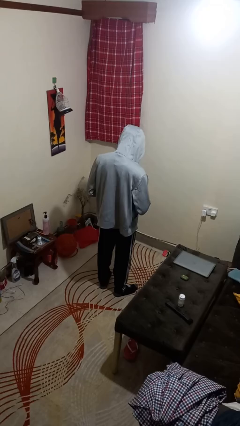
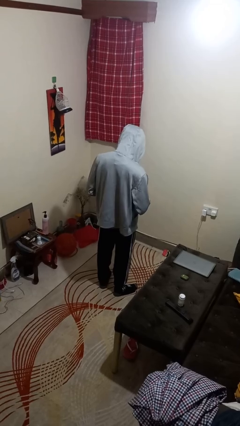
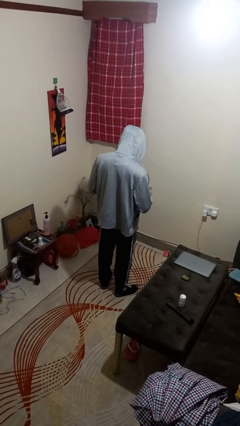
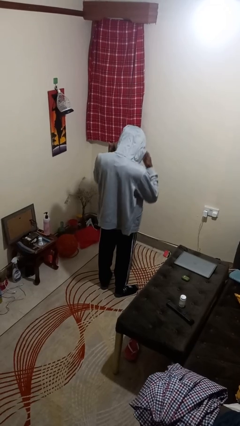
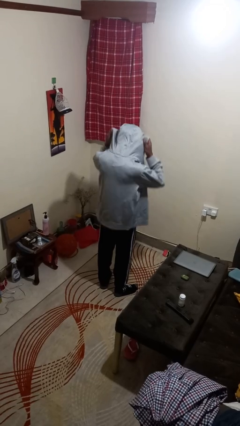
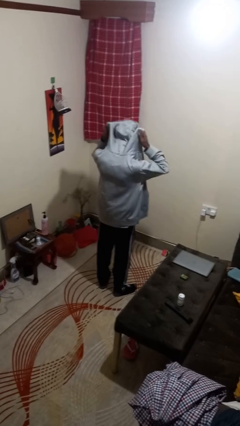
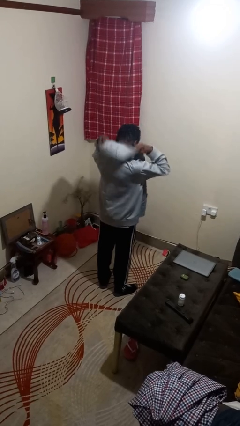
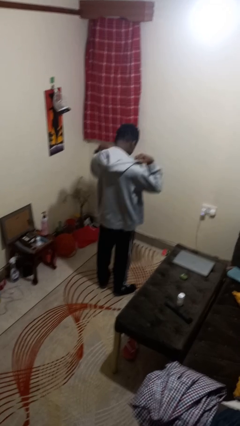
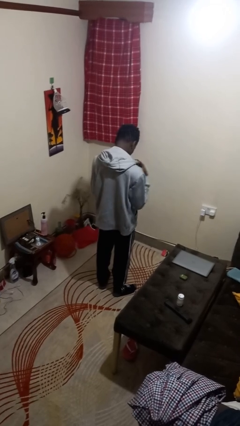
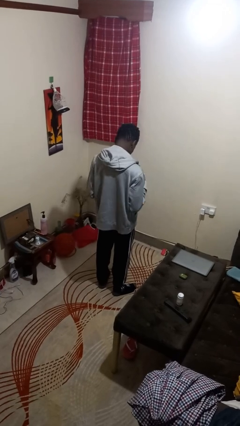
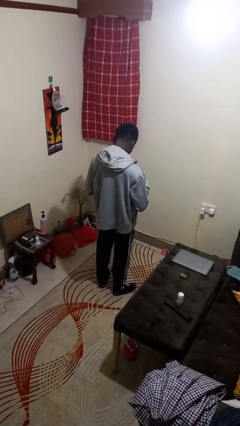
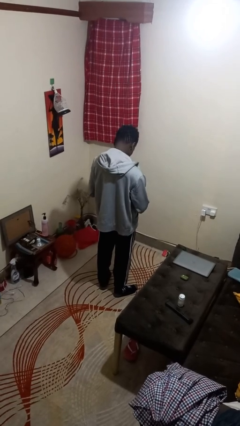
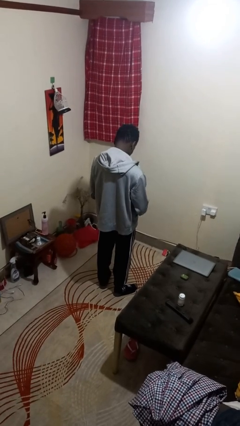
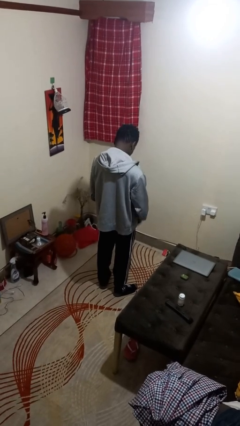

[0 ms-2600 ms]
person takes off hoodie

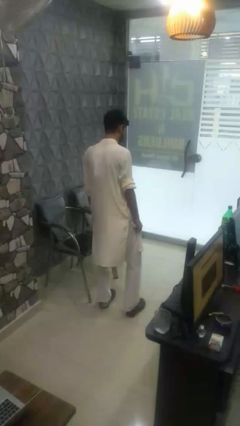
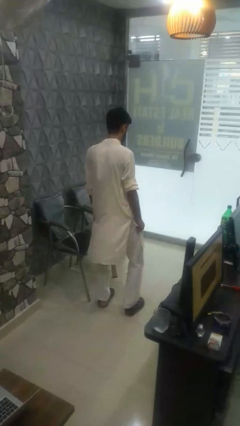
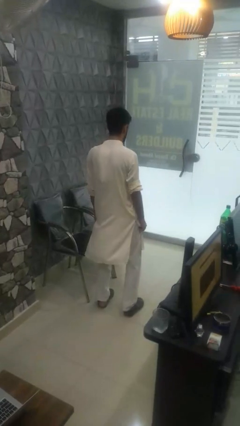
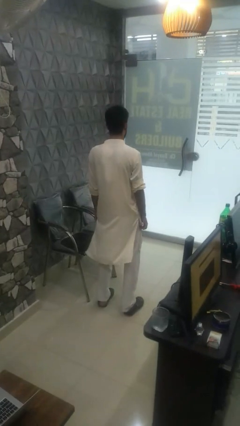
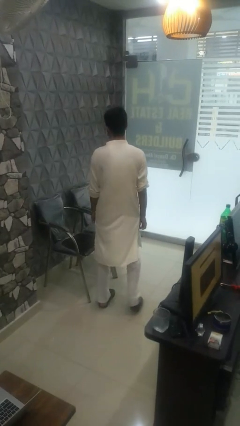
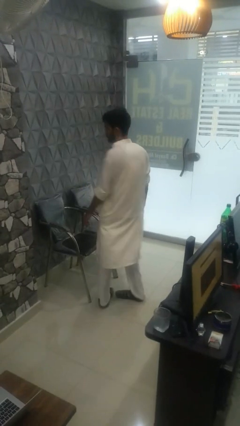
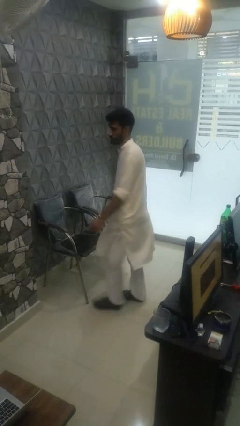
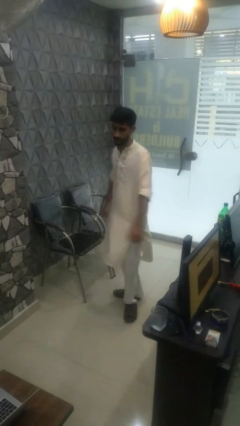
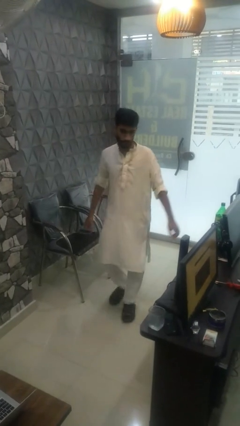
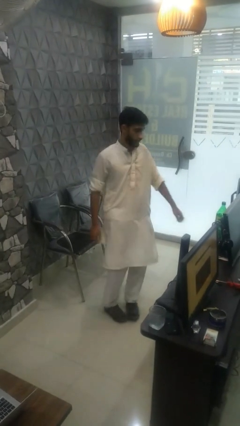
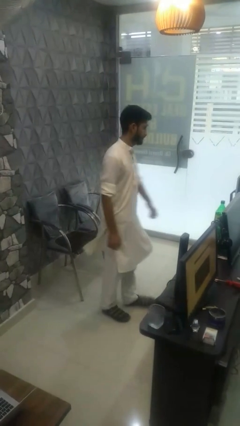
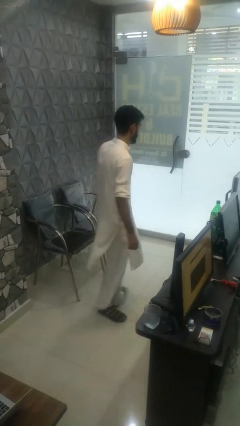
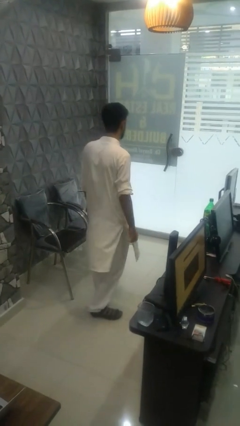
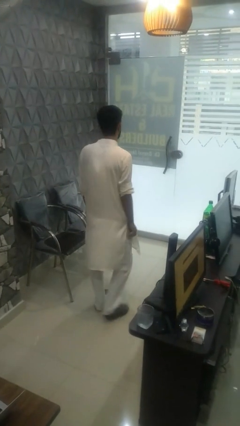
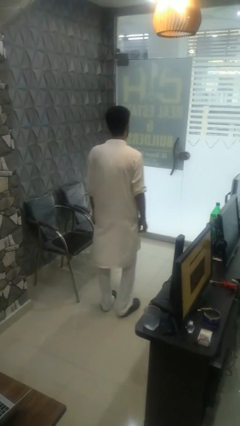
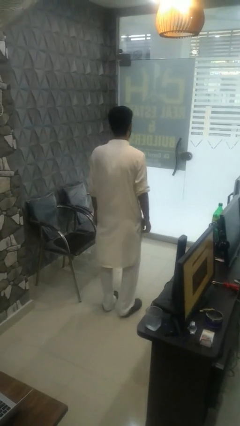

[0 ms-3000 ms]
person twirls

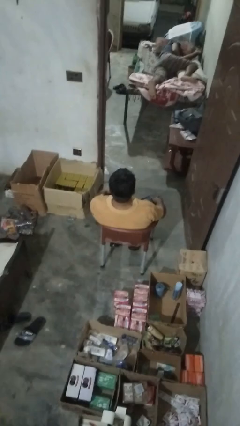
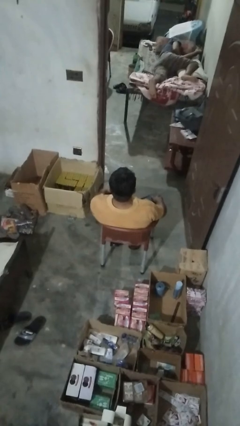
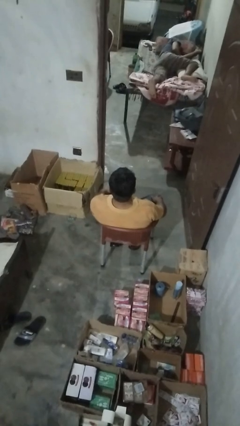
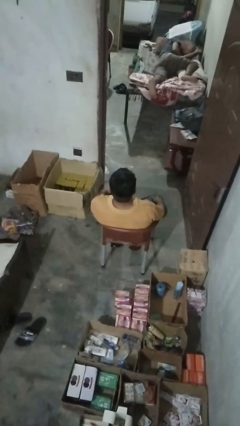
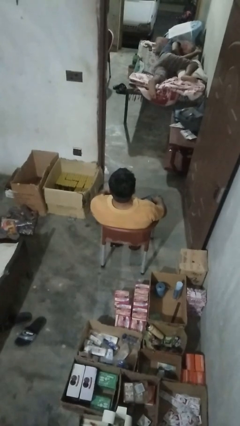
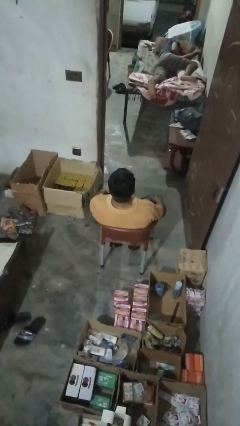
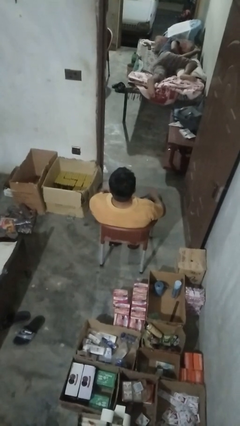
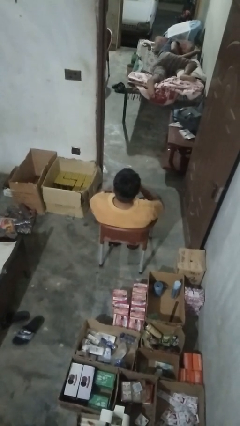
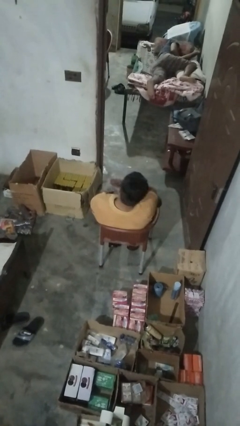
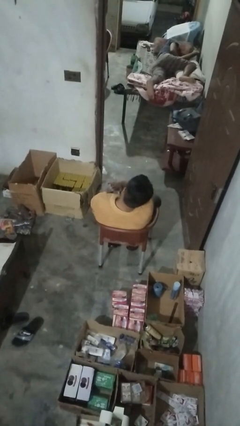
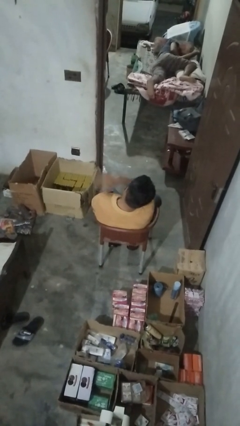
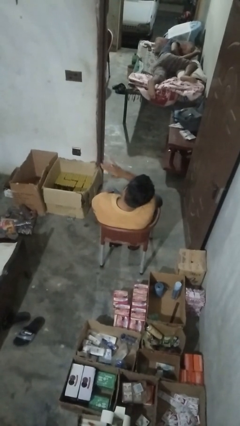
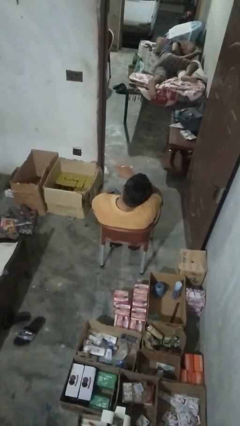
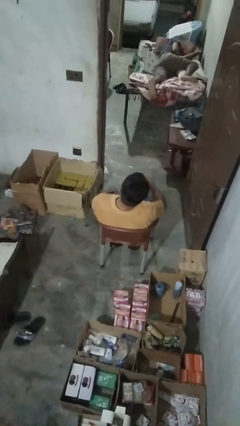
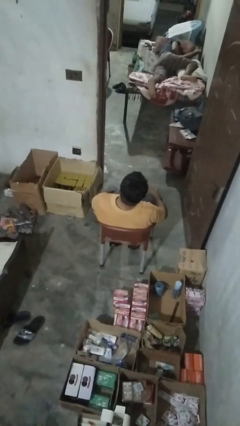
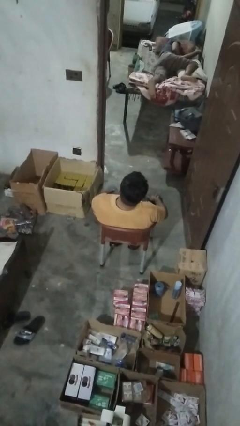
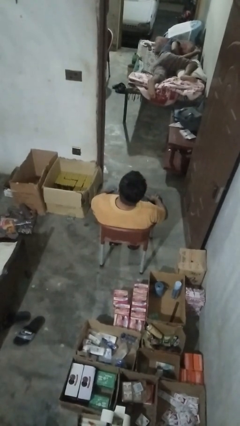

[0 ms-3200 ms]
person swats bug

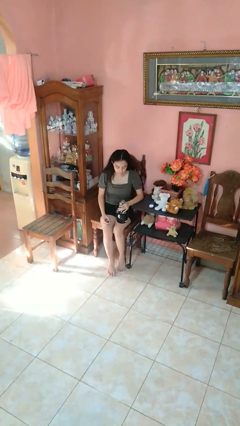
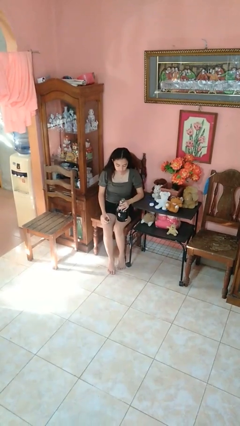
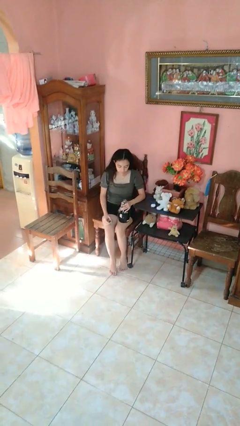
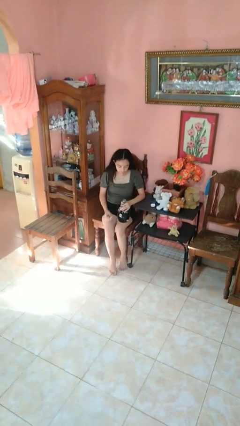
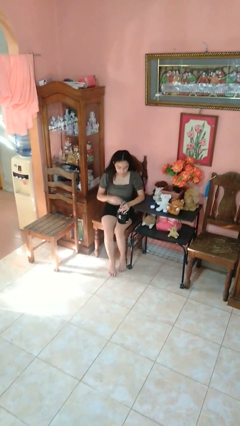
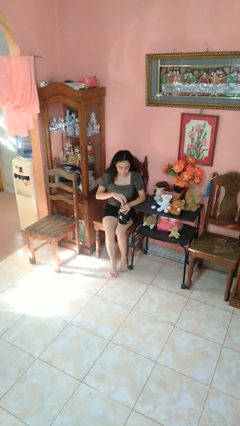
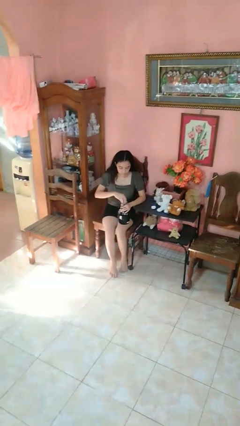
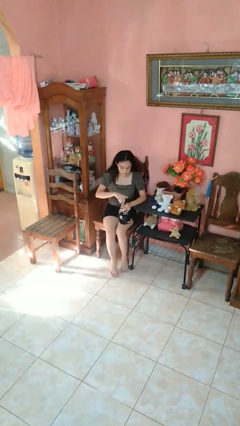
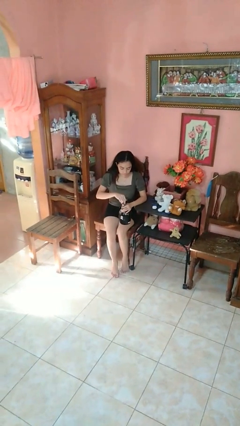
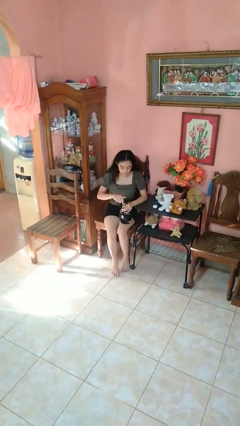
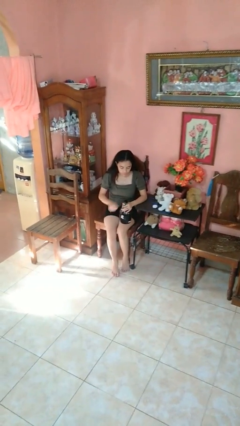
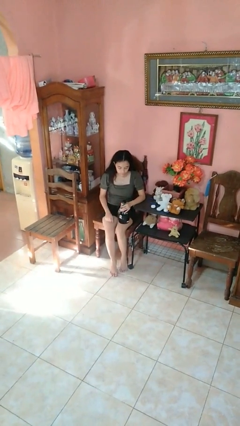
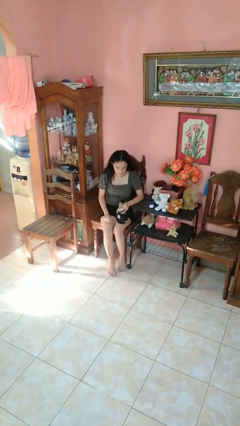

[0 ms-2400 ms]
person screws lid to bottle

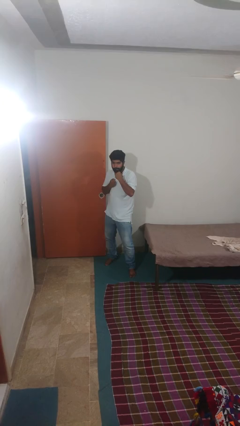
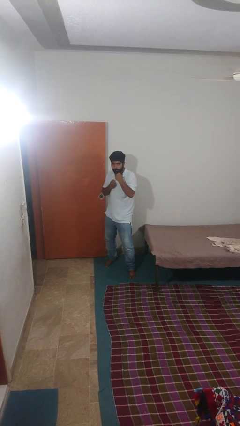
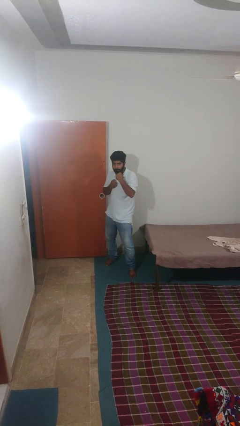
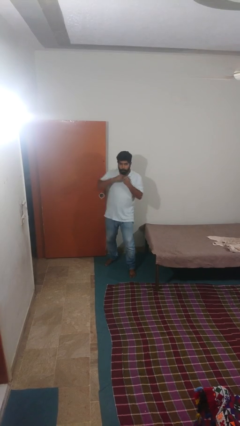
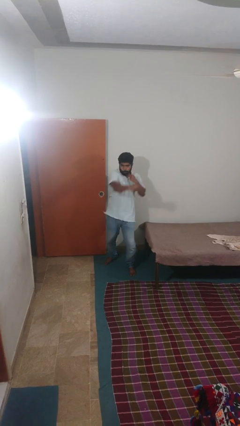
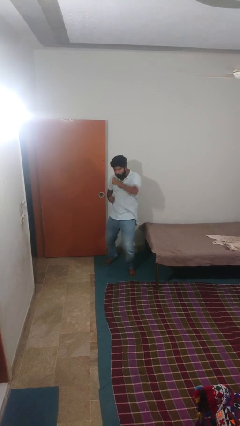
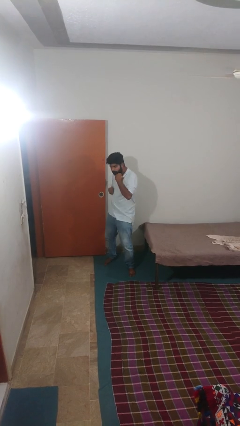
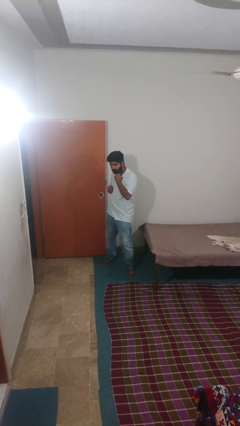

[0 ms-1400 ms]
person punches

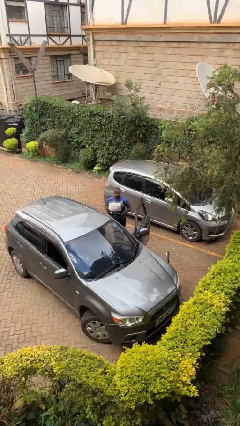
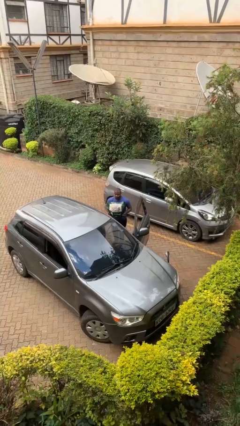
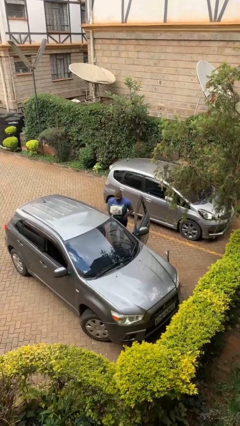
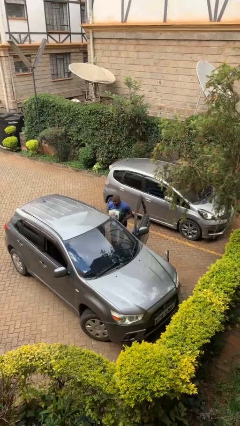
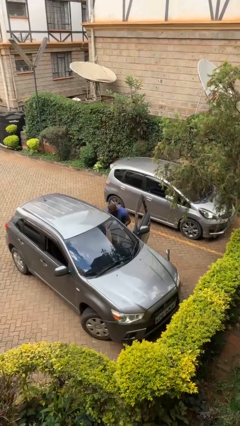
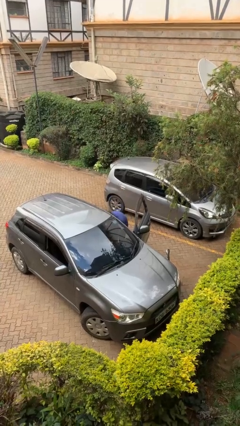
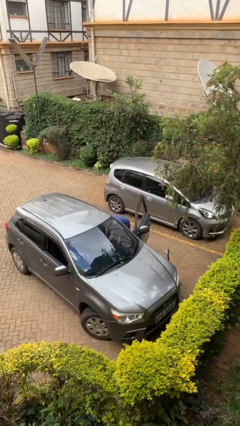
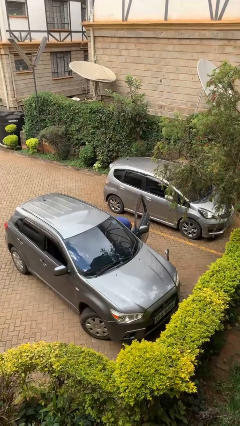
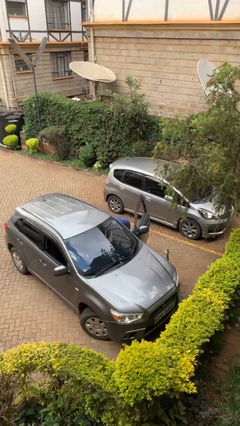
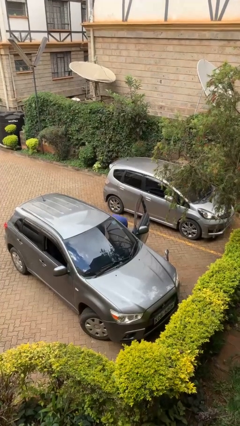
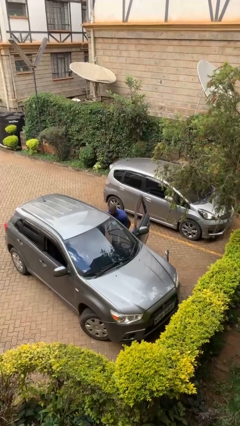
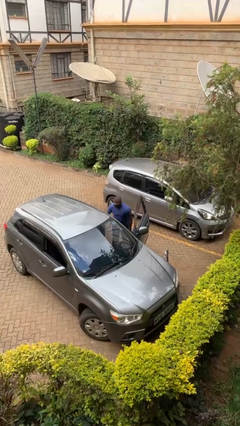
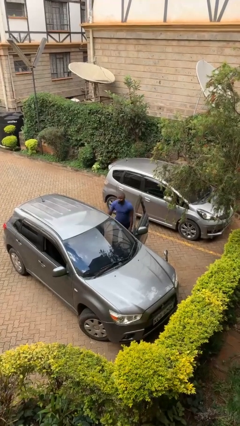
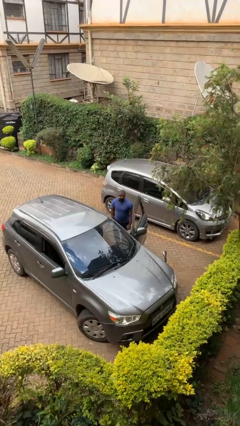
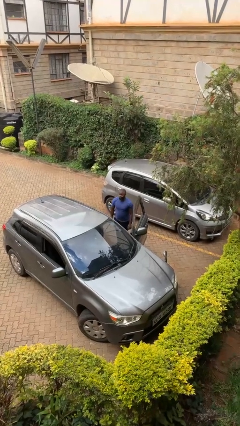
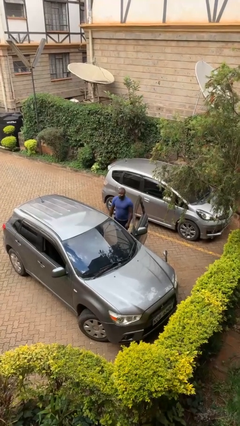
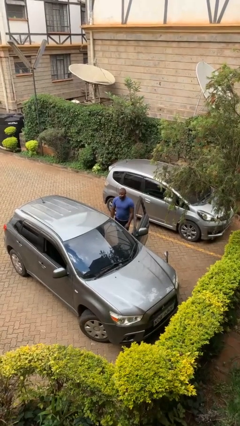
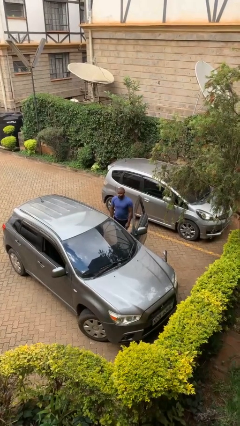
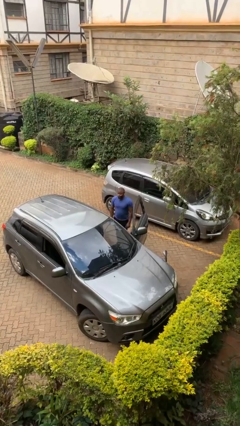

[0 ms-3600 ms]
person loads car

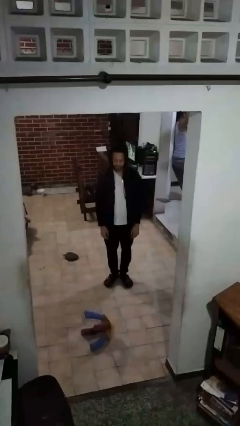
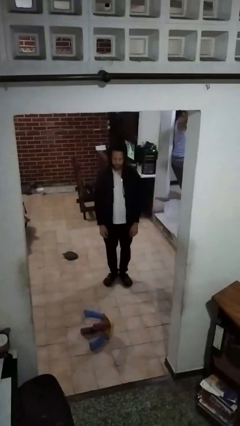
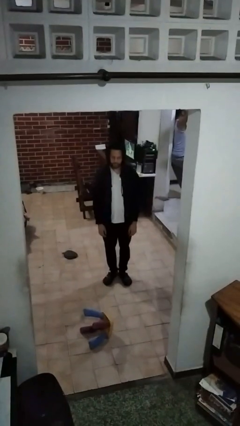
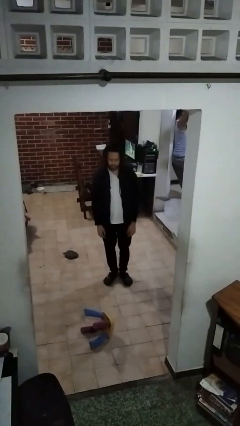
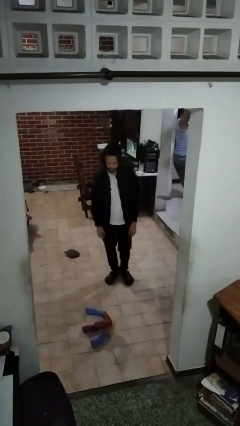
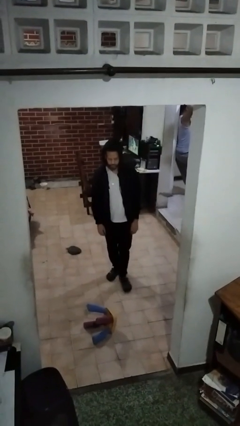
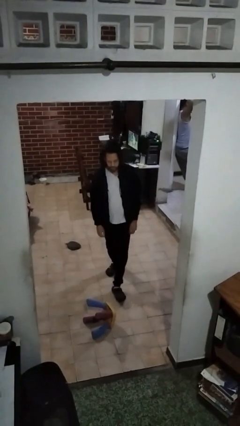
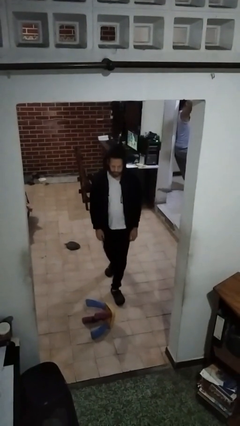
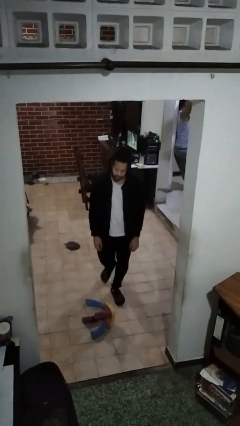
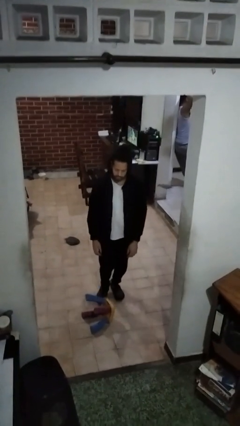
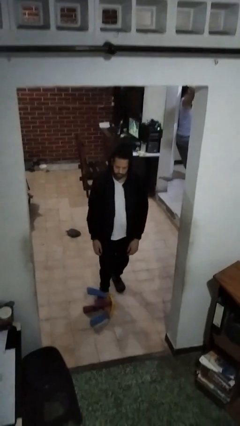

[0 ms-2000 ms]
person trips on object on floor
